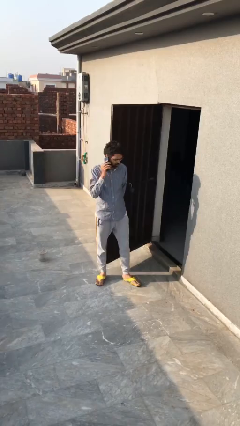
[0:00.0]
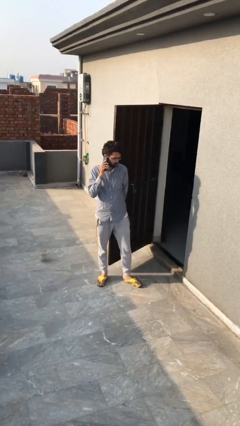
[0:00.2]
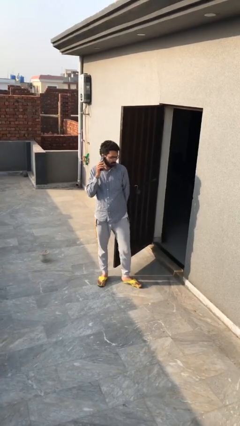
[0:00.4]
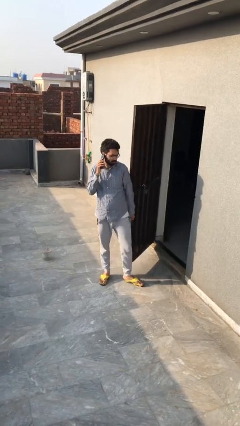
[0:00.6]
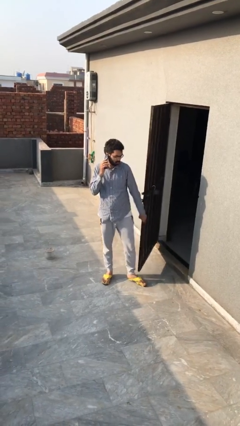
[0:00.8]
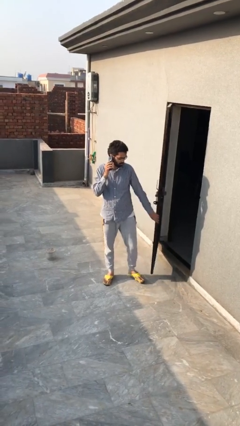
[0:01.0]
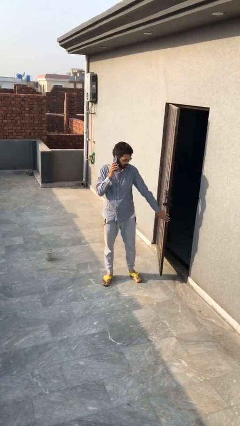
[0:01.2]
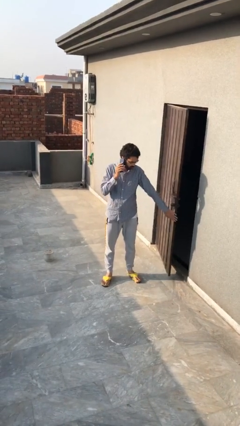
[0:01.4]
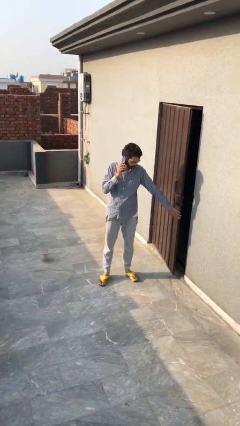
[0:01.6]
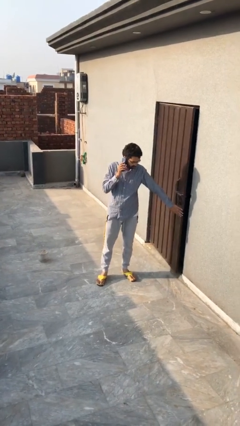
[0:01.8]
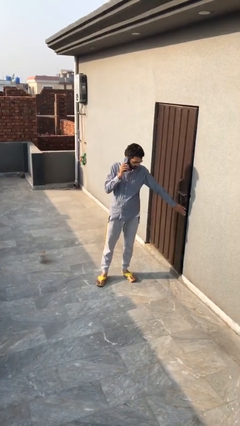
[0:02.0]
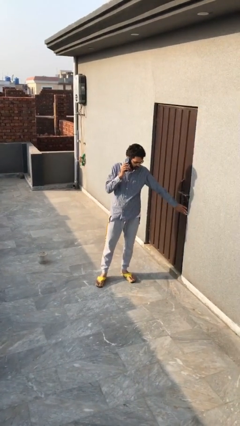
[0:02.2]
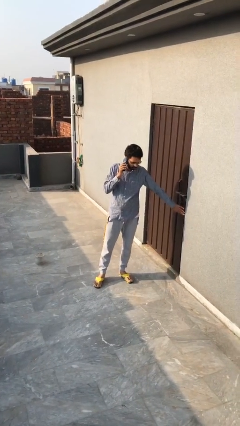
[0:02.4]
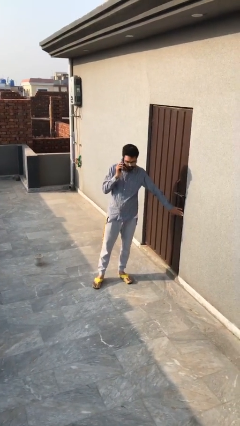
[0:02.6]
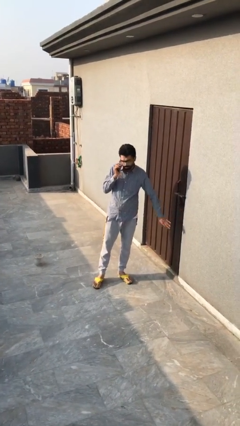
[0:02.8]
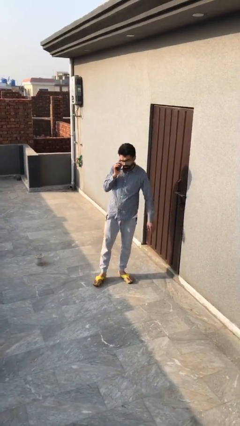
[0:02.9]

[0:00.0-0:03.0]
person closes facility door

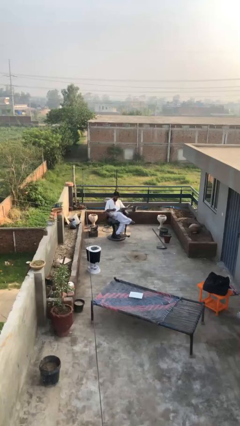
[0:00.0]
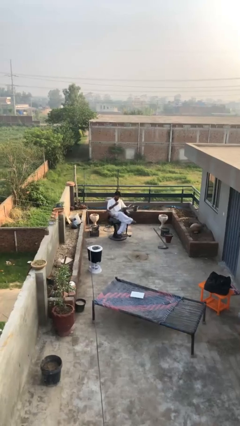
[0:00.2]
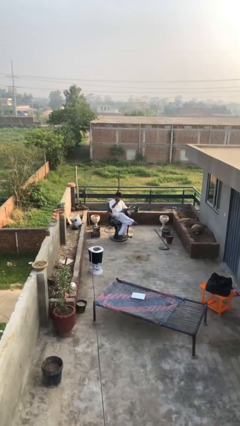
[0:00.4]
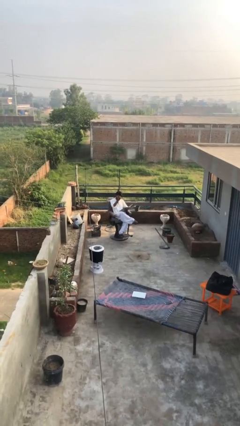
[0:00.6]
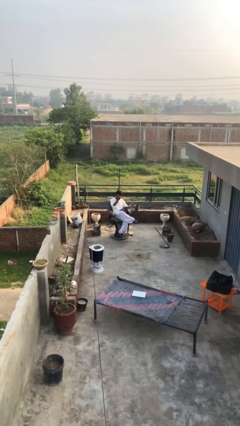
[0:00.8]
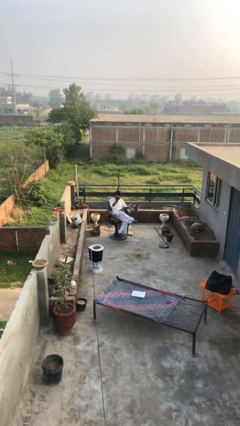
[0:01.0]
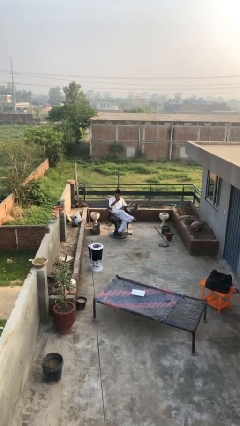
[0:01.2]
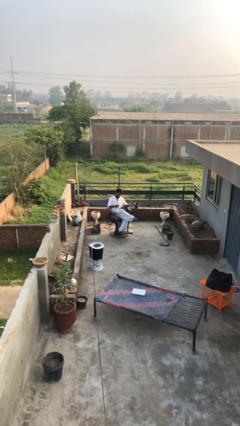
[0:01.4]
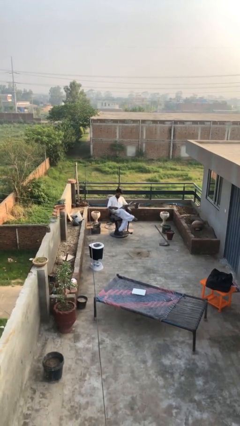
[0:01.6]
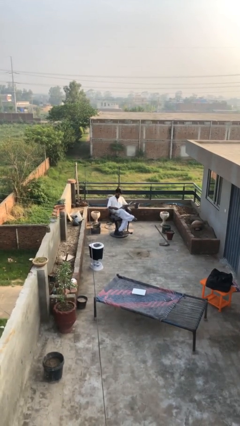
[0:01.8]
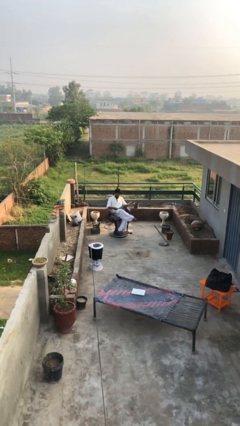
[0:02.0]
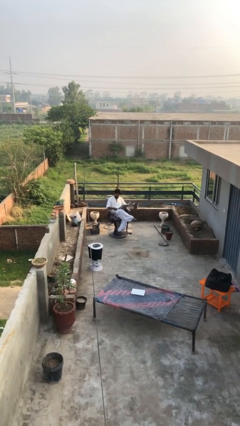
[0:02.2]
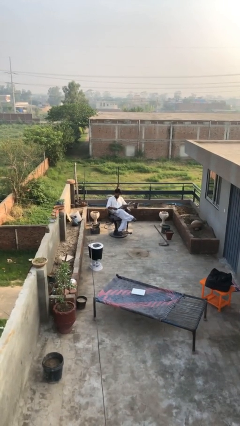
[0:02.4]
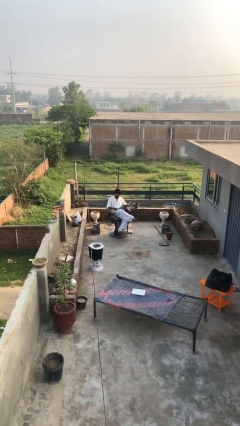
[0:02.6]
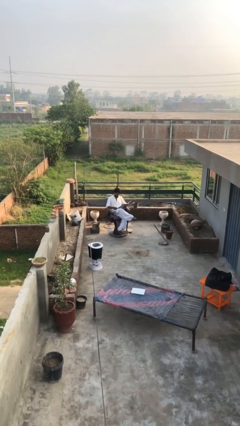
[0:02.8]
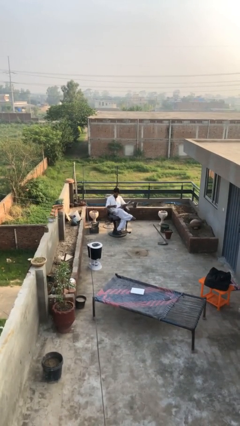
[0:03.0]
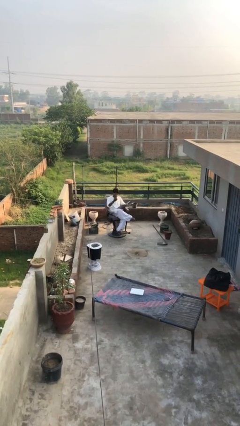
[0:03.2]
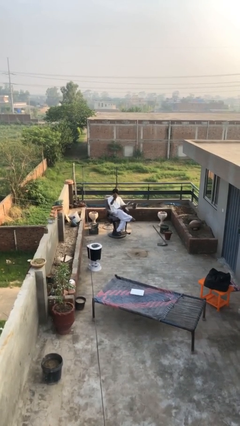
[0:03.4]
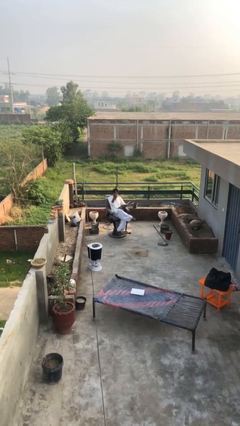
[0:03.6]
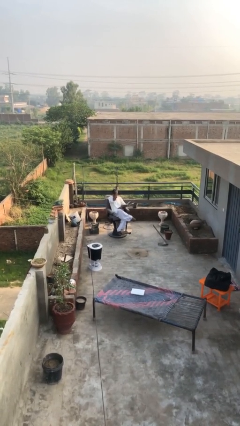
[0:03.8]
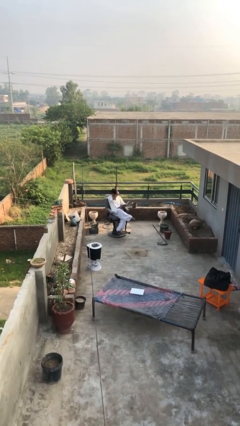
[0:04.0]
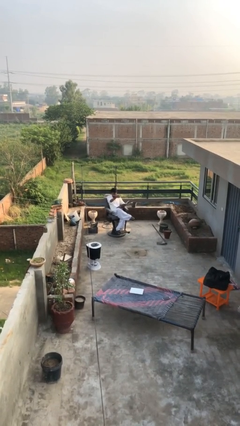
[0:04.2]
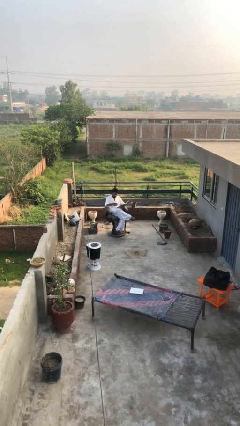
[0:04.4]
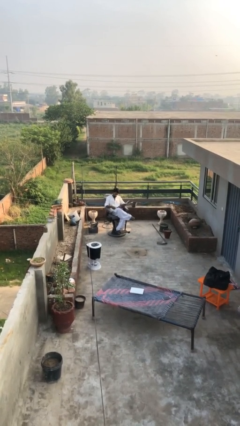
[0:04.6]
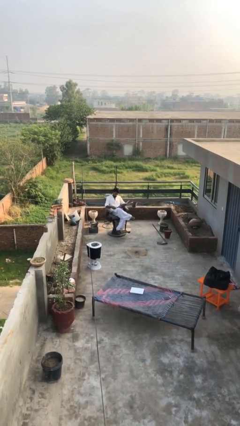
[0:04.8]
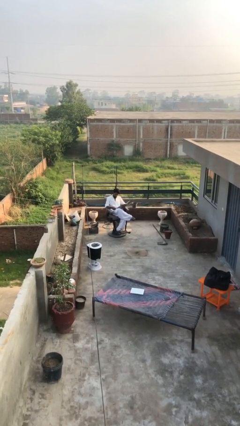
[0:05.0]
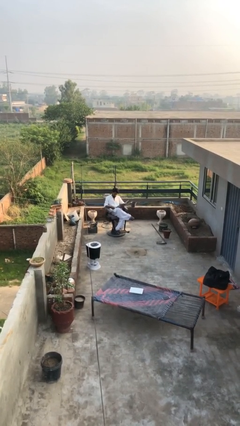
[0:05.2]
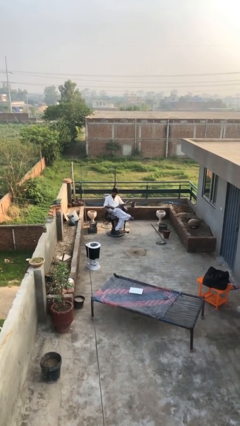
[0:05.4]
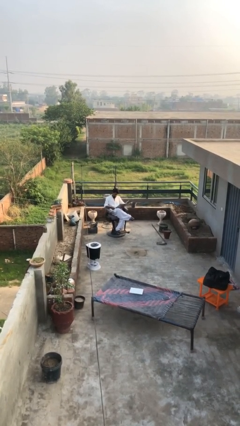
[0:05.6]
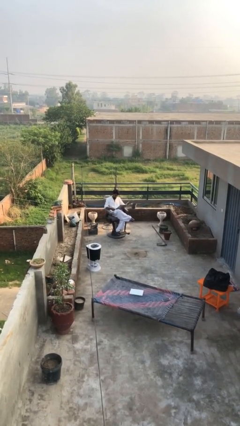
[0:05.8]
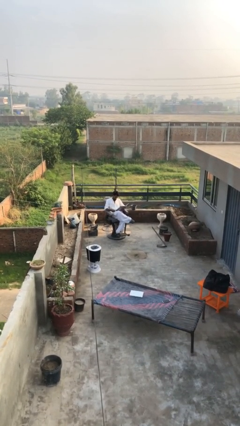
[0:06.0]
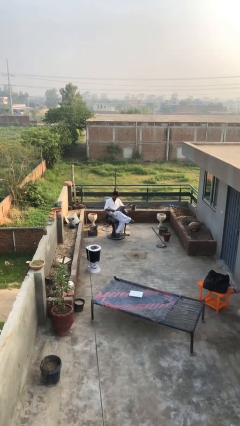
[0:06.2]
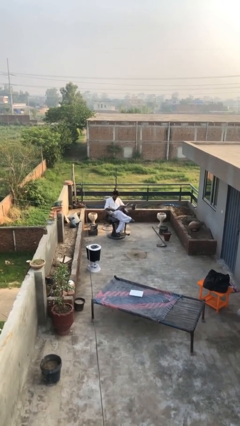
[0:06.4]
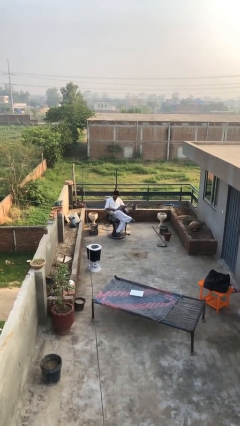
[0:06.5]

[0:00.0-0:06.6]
person reads document

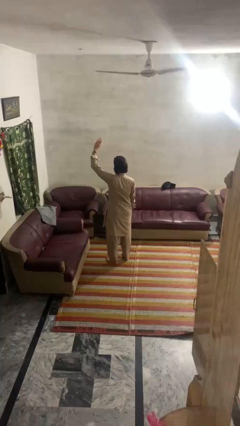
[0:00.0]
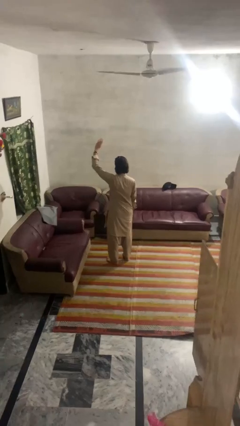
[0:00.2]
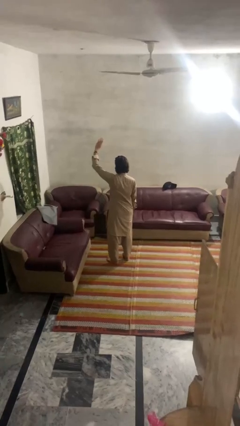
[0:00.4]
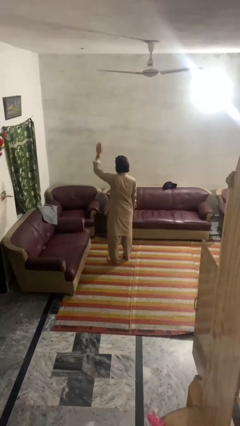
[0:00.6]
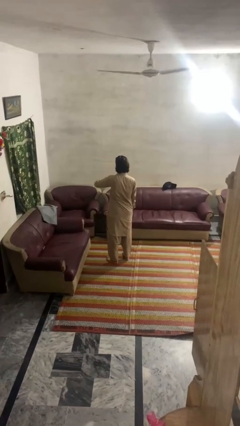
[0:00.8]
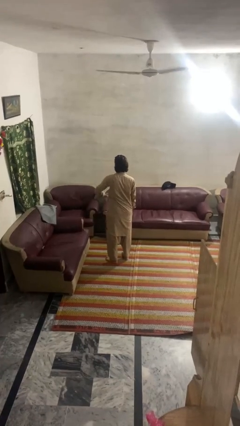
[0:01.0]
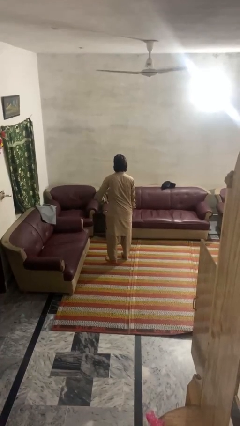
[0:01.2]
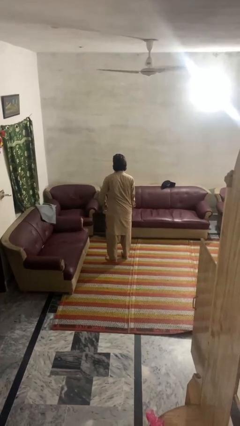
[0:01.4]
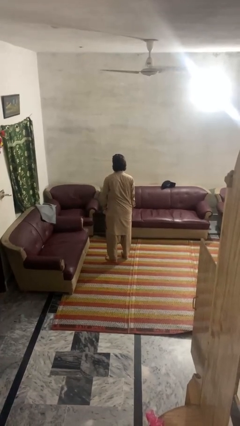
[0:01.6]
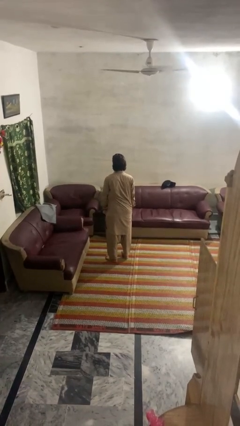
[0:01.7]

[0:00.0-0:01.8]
person gestures swipe down

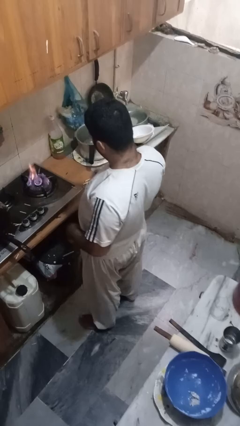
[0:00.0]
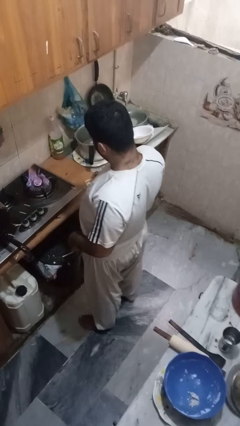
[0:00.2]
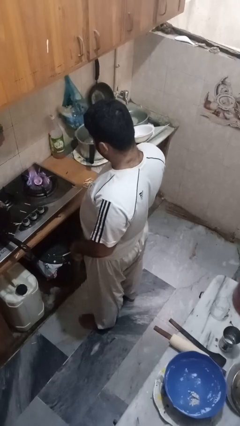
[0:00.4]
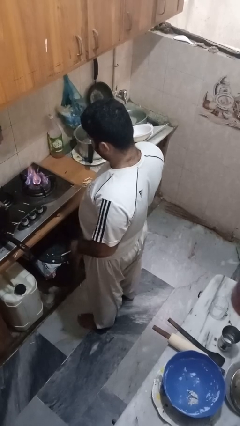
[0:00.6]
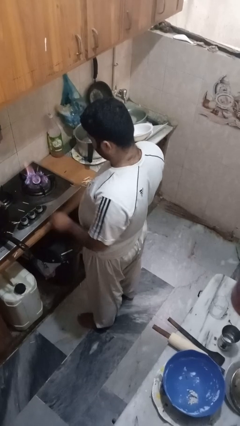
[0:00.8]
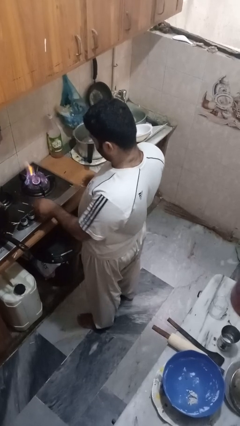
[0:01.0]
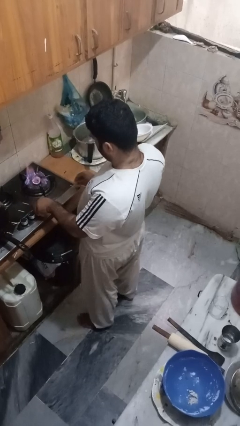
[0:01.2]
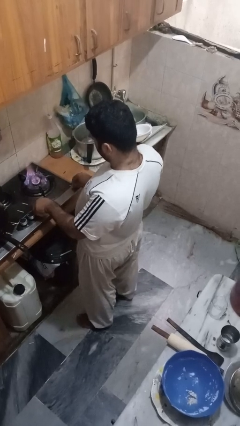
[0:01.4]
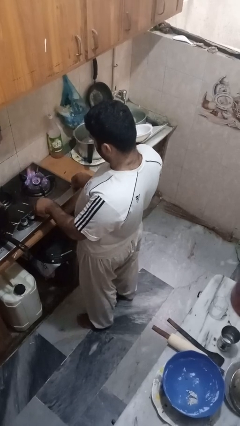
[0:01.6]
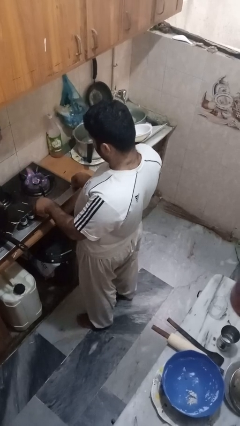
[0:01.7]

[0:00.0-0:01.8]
person turns off stovetop

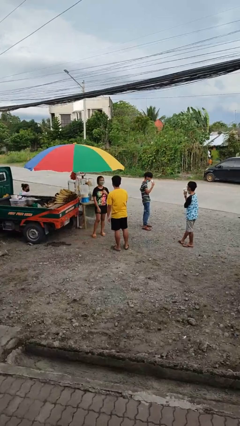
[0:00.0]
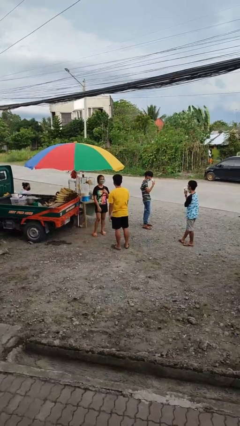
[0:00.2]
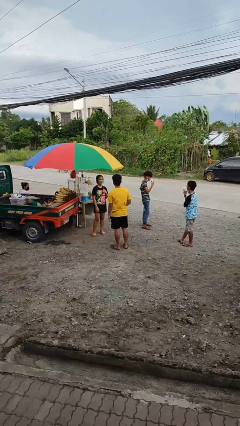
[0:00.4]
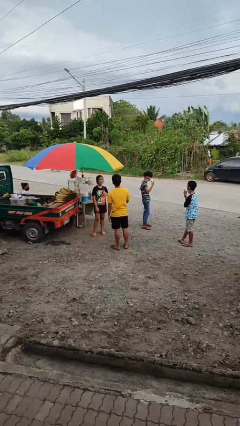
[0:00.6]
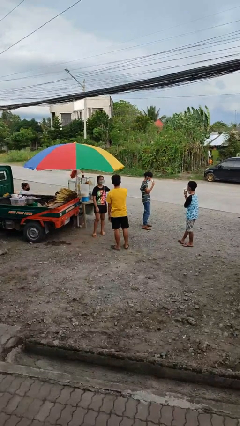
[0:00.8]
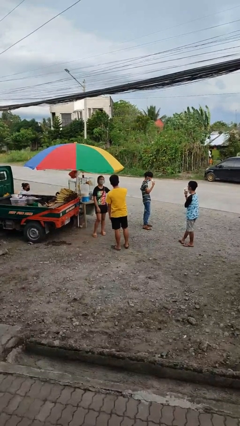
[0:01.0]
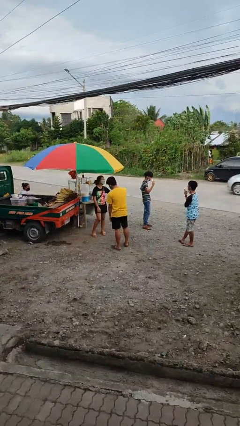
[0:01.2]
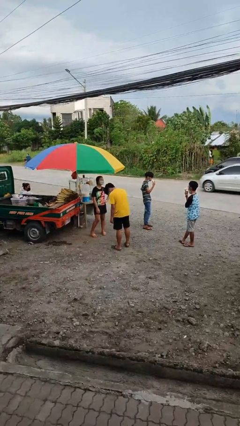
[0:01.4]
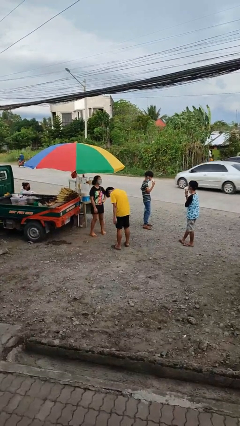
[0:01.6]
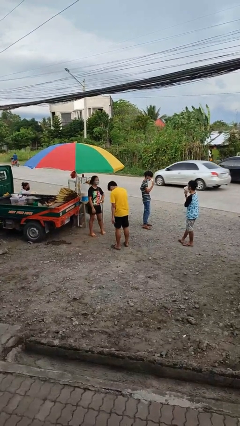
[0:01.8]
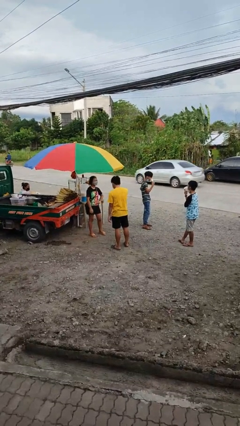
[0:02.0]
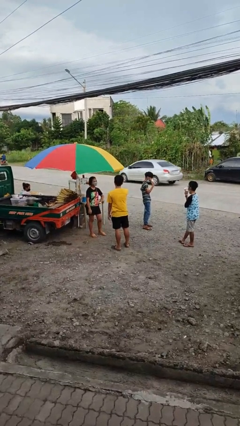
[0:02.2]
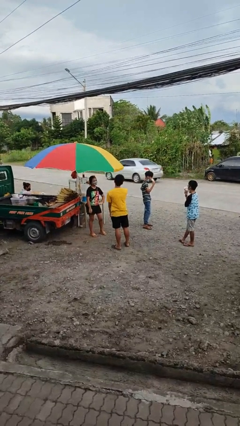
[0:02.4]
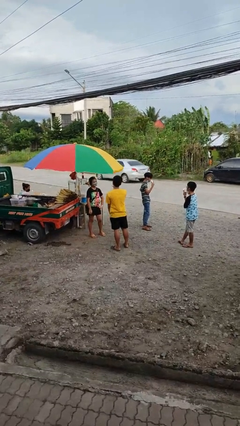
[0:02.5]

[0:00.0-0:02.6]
person laughs with person

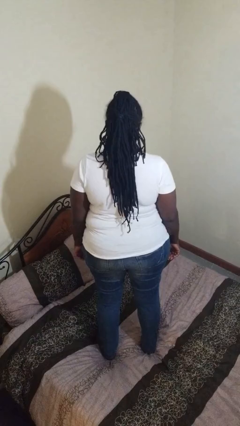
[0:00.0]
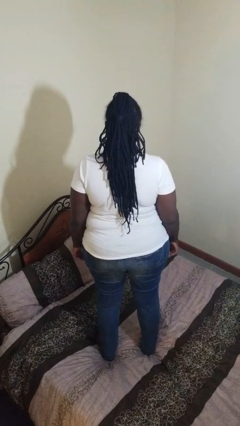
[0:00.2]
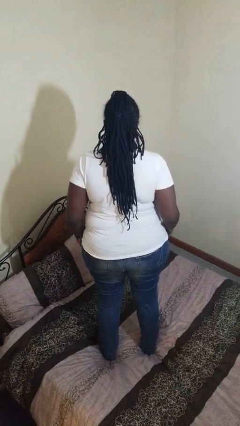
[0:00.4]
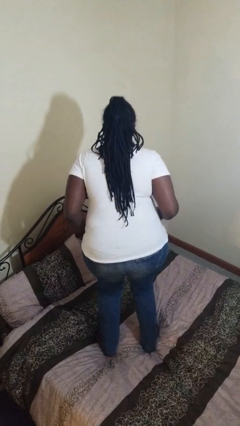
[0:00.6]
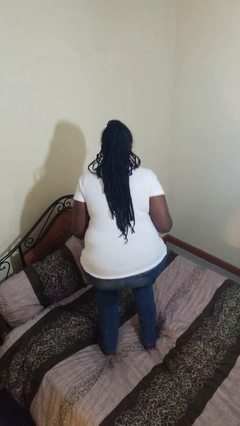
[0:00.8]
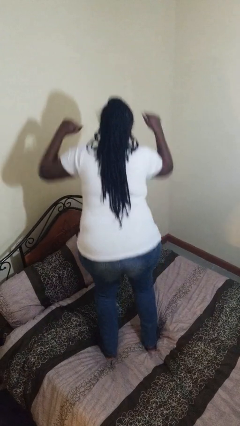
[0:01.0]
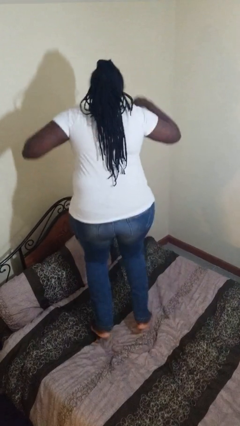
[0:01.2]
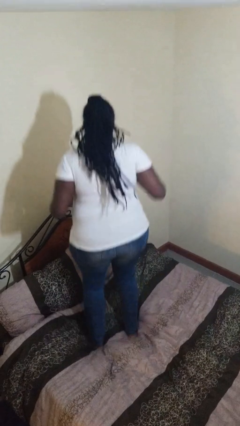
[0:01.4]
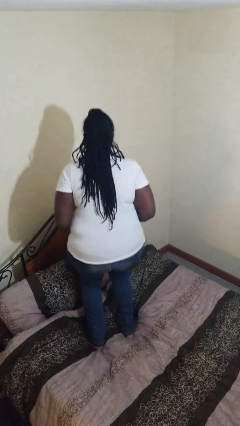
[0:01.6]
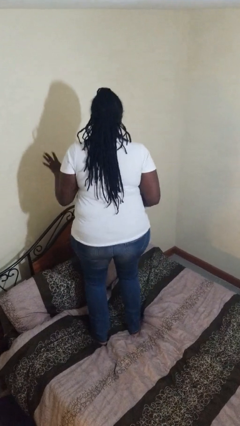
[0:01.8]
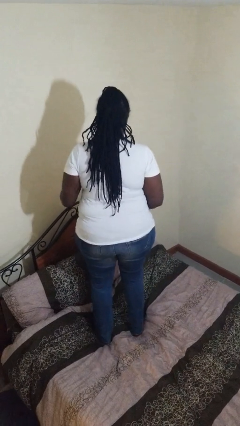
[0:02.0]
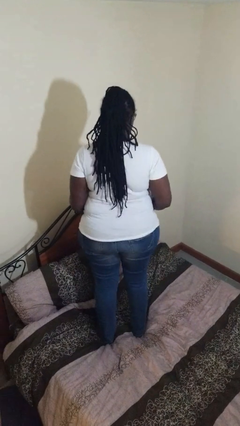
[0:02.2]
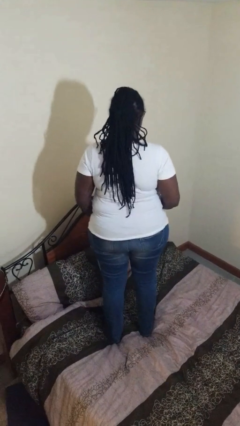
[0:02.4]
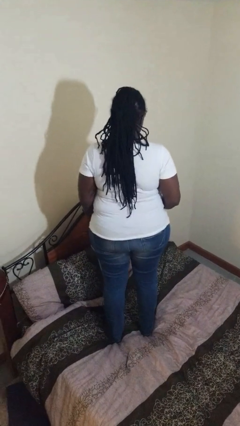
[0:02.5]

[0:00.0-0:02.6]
person jumps on bed
